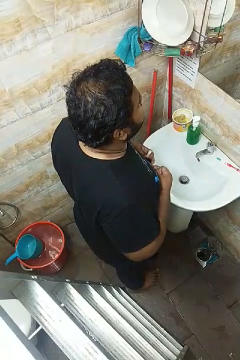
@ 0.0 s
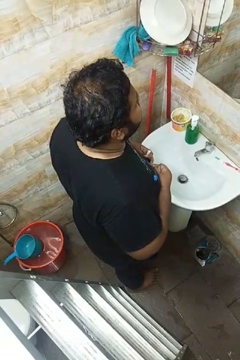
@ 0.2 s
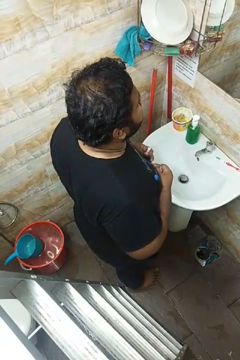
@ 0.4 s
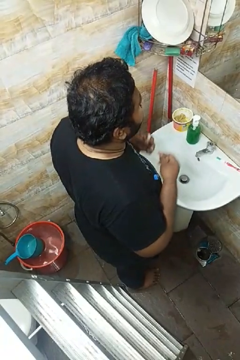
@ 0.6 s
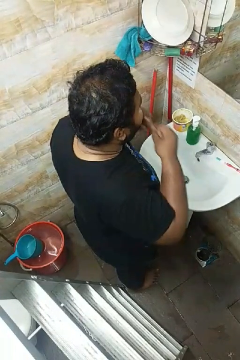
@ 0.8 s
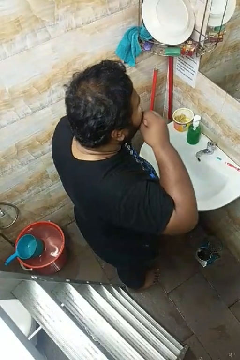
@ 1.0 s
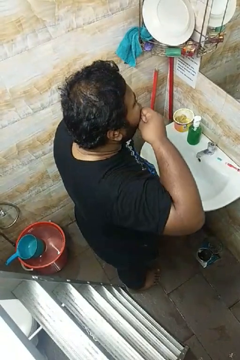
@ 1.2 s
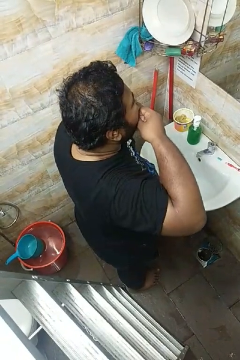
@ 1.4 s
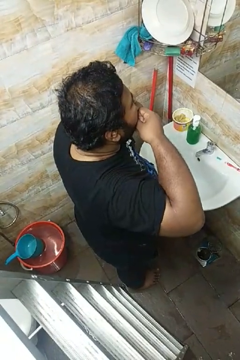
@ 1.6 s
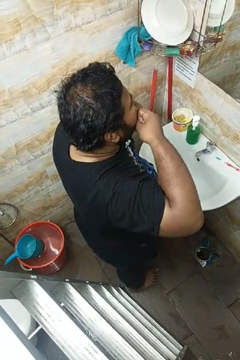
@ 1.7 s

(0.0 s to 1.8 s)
person flosses

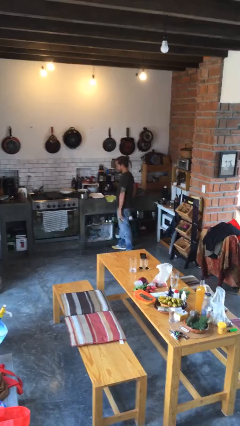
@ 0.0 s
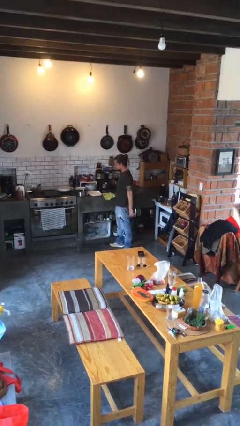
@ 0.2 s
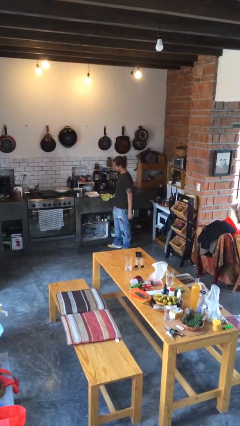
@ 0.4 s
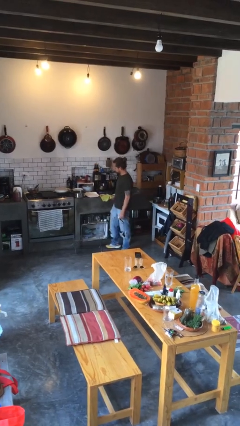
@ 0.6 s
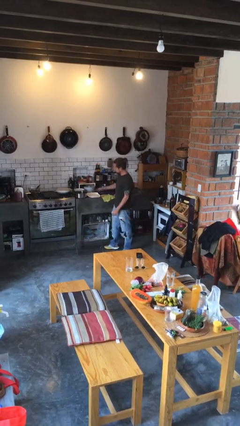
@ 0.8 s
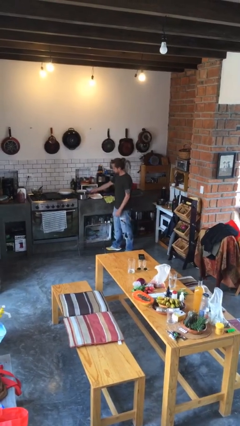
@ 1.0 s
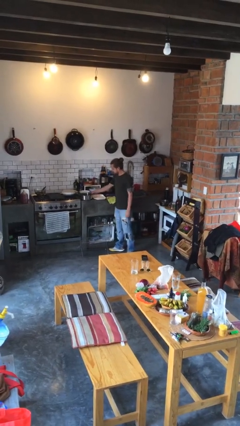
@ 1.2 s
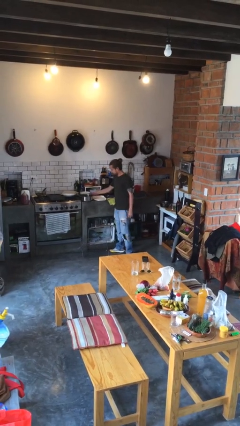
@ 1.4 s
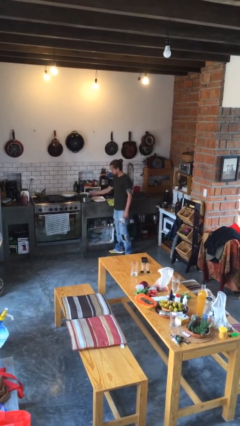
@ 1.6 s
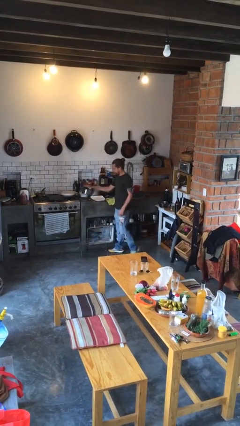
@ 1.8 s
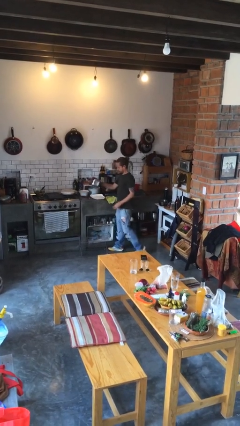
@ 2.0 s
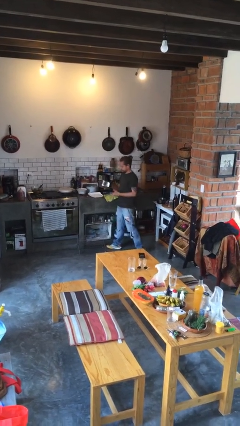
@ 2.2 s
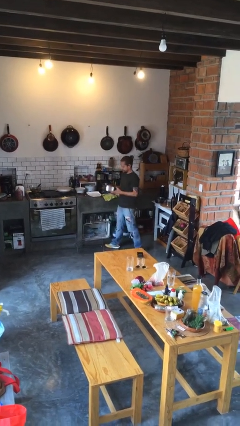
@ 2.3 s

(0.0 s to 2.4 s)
person picks up object from countertop

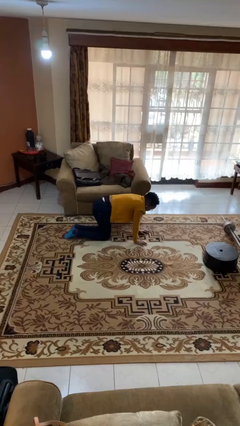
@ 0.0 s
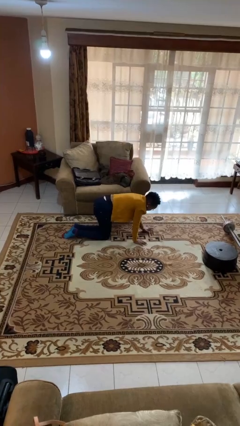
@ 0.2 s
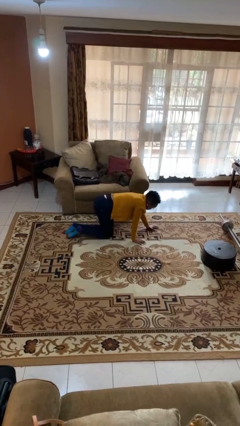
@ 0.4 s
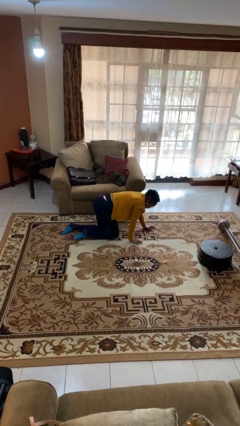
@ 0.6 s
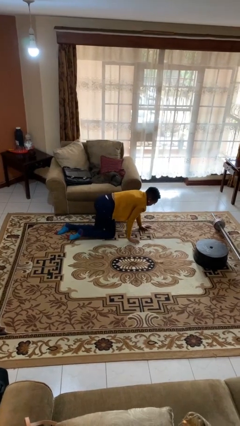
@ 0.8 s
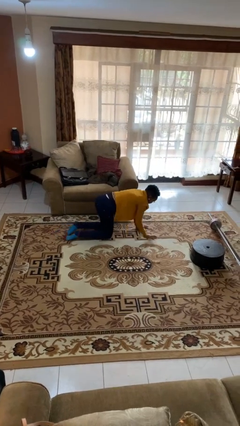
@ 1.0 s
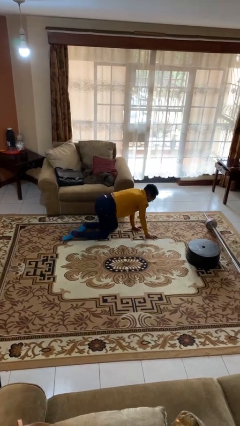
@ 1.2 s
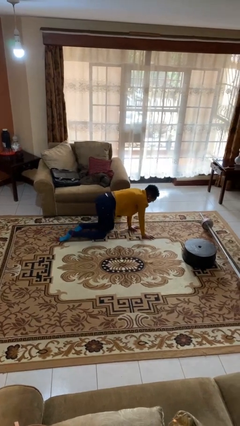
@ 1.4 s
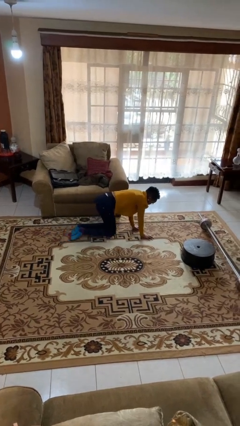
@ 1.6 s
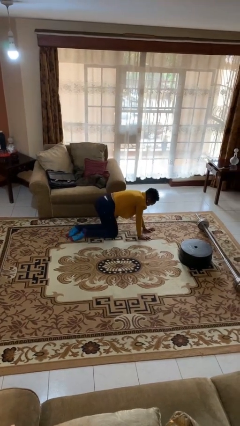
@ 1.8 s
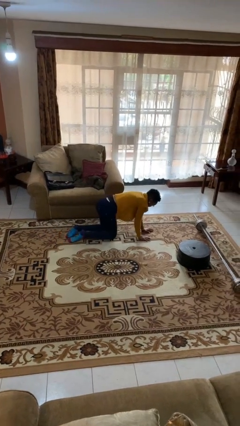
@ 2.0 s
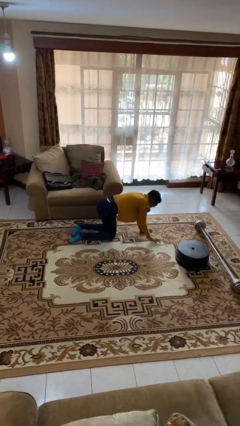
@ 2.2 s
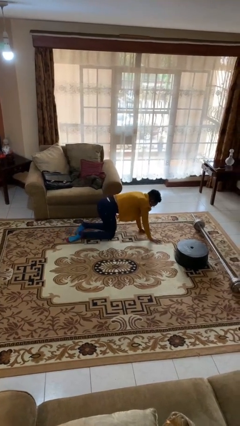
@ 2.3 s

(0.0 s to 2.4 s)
person crawls

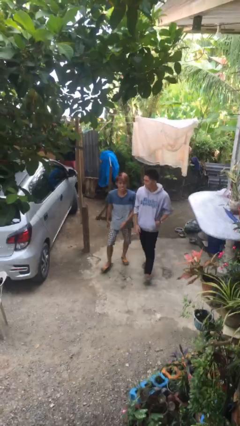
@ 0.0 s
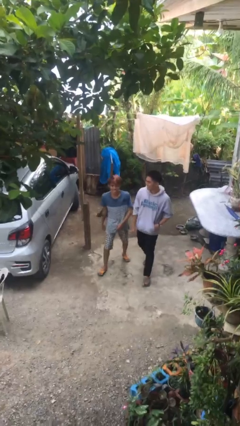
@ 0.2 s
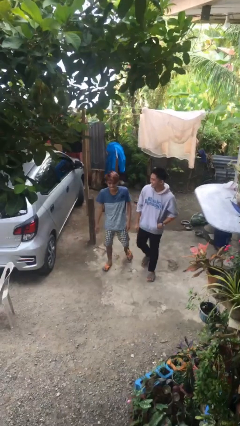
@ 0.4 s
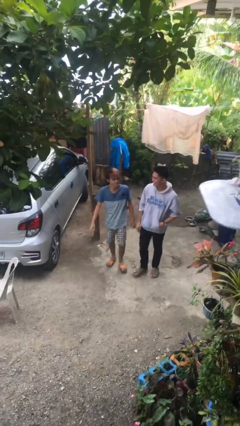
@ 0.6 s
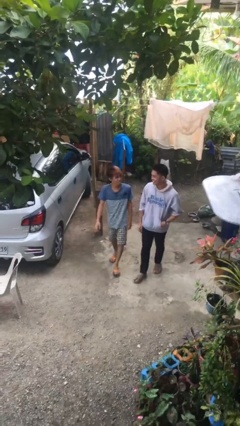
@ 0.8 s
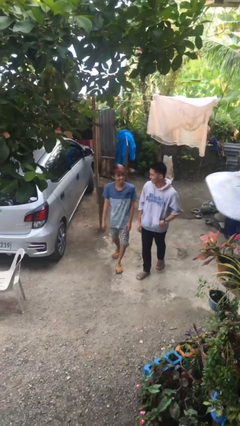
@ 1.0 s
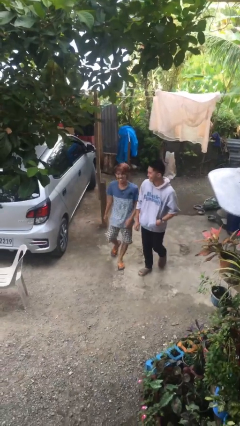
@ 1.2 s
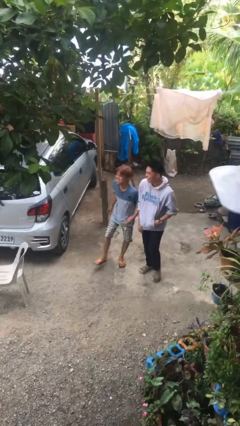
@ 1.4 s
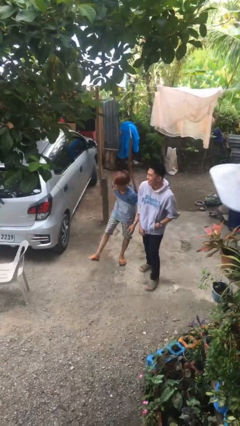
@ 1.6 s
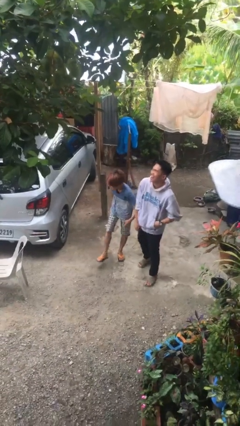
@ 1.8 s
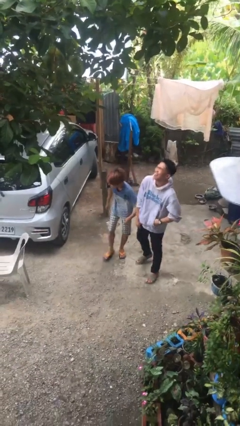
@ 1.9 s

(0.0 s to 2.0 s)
person talks to person

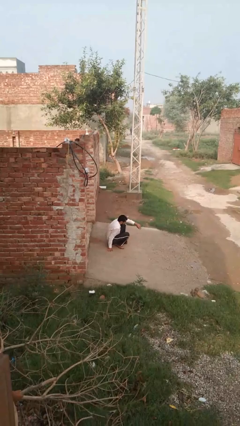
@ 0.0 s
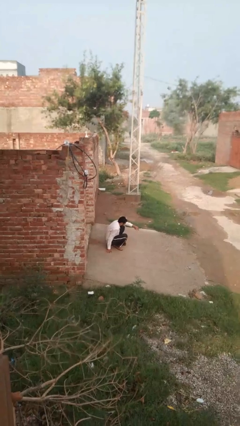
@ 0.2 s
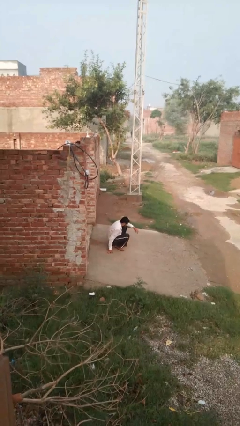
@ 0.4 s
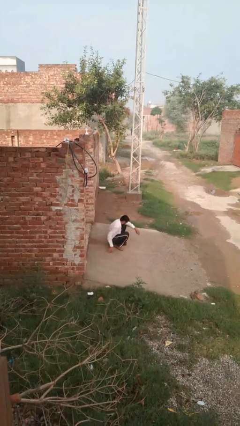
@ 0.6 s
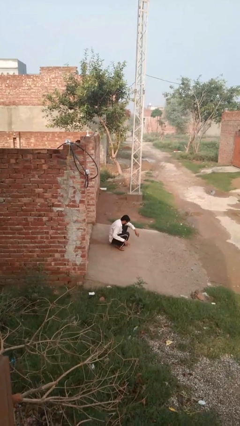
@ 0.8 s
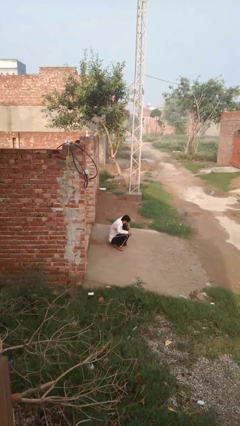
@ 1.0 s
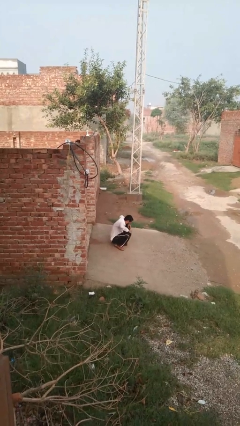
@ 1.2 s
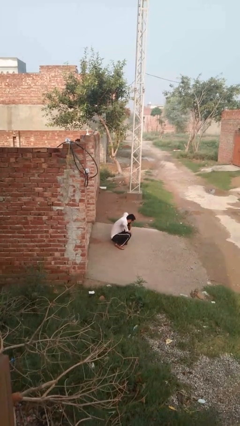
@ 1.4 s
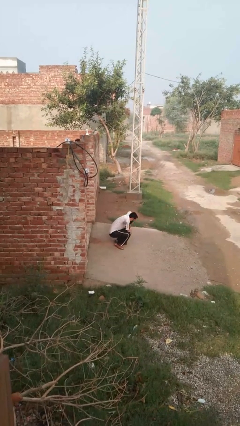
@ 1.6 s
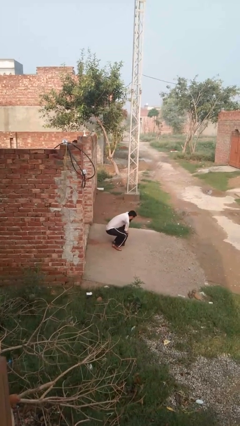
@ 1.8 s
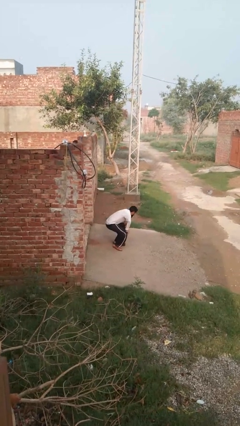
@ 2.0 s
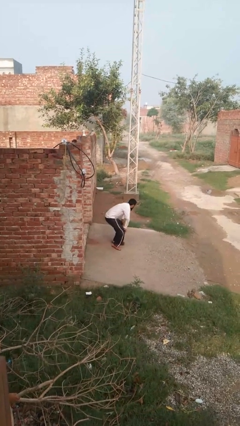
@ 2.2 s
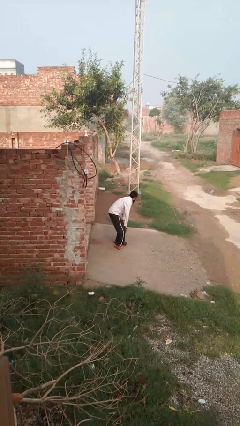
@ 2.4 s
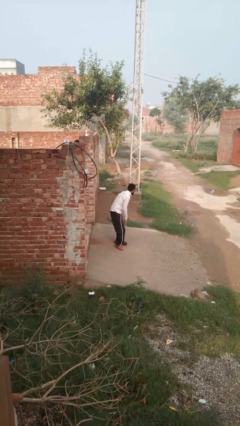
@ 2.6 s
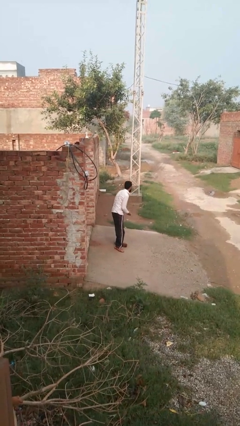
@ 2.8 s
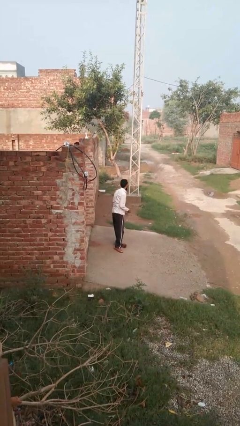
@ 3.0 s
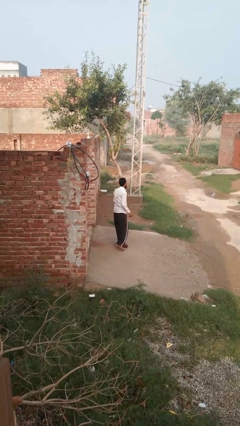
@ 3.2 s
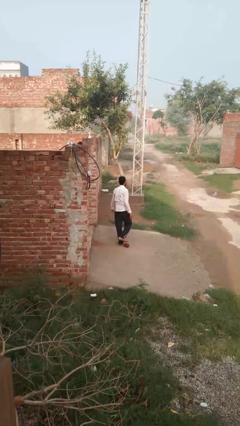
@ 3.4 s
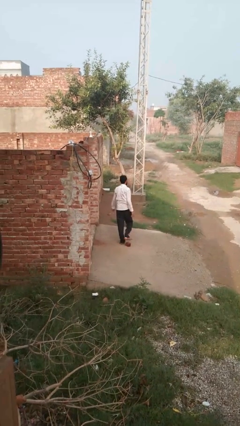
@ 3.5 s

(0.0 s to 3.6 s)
person stands up from floor

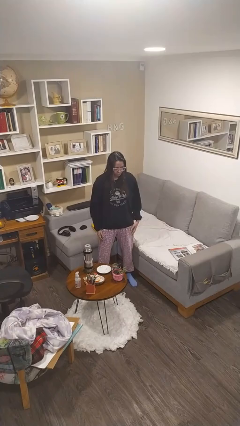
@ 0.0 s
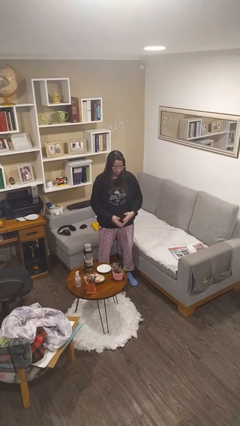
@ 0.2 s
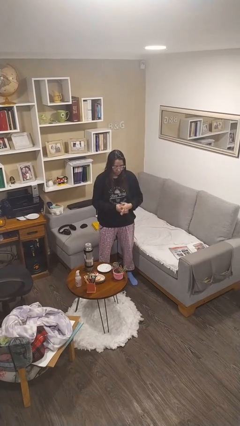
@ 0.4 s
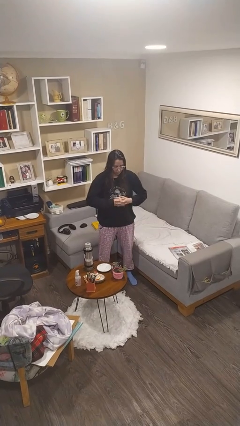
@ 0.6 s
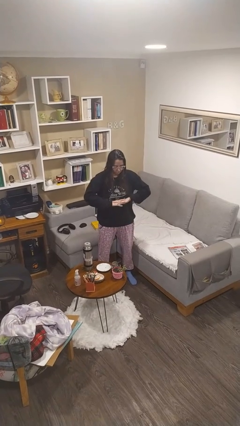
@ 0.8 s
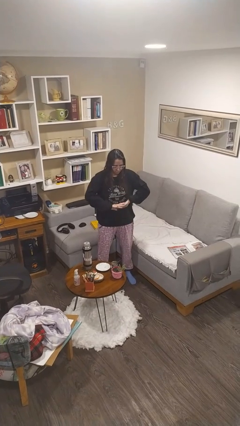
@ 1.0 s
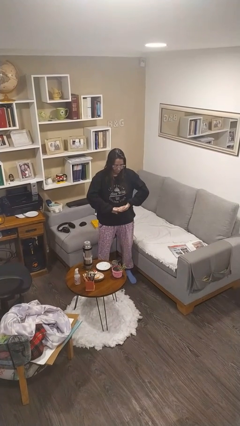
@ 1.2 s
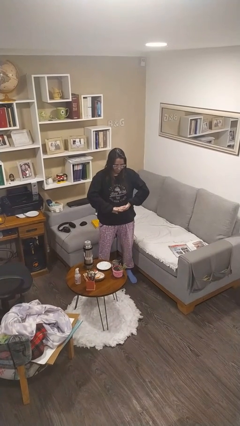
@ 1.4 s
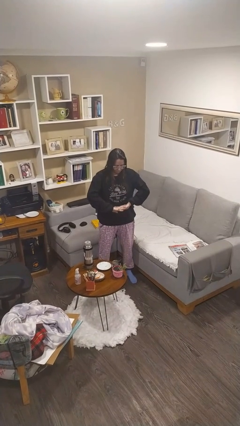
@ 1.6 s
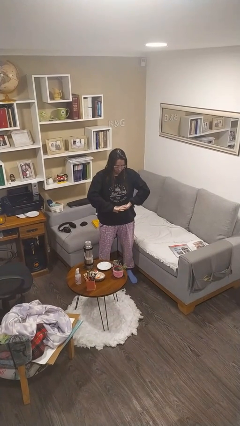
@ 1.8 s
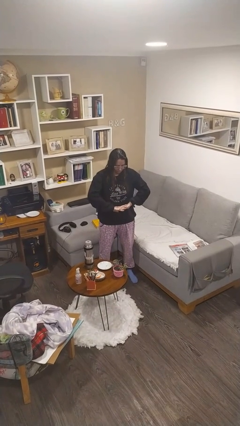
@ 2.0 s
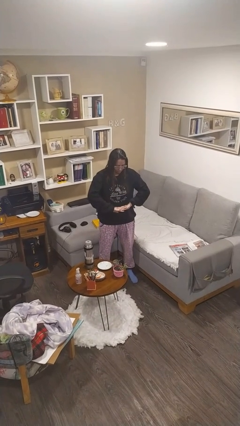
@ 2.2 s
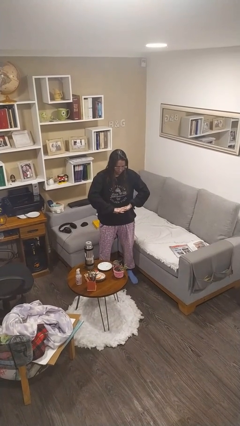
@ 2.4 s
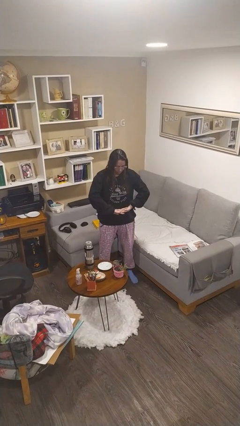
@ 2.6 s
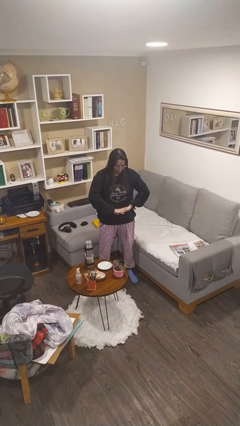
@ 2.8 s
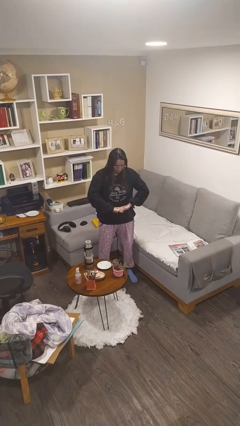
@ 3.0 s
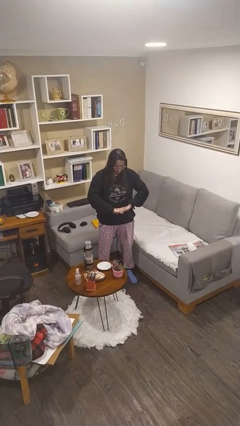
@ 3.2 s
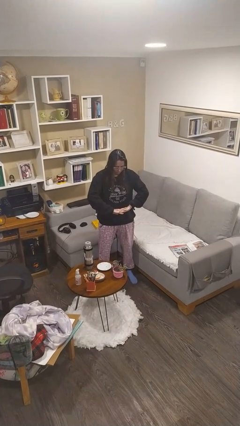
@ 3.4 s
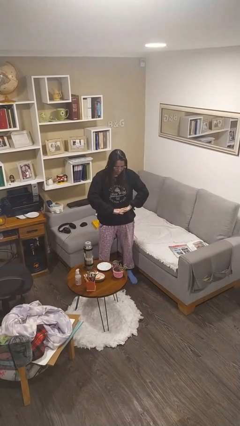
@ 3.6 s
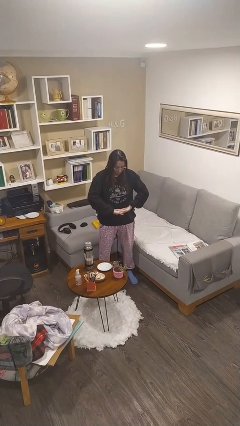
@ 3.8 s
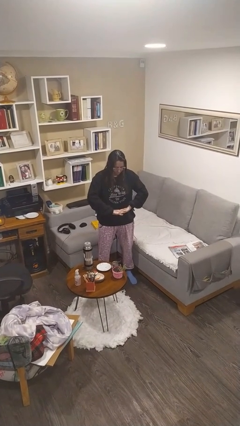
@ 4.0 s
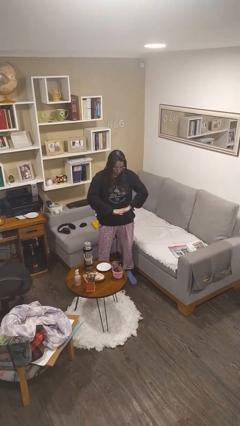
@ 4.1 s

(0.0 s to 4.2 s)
person cracks knuckles

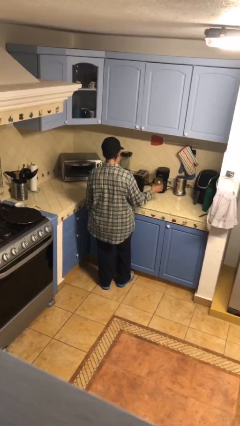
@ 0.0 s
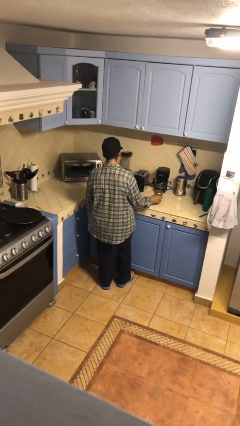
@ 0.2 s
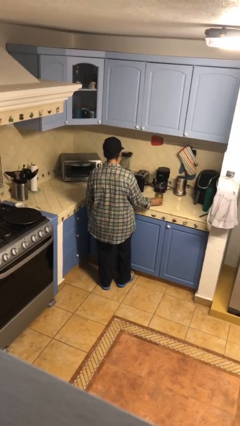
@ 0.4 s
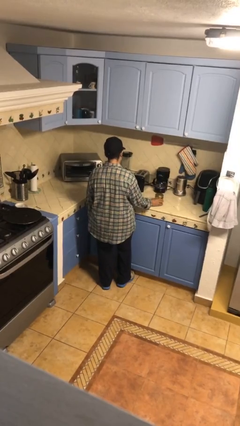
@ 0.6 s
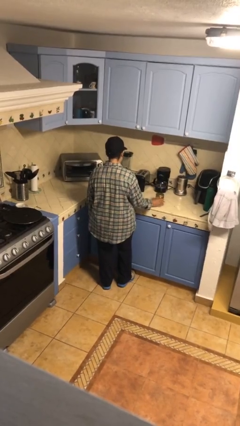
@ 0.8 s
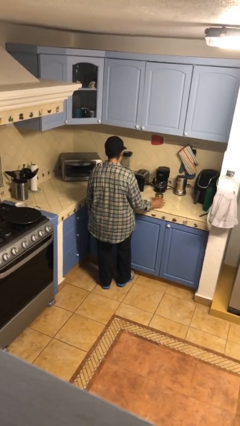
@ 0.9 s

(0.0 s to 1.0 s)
person puts down object on countertop
